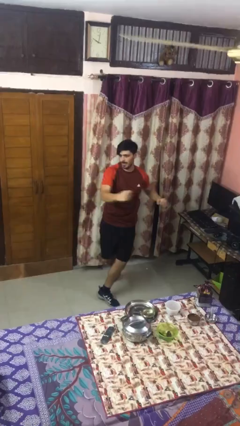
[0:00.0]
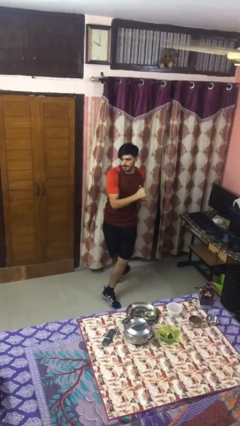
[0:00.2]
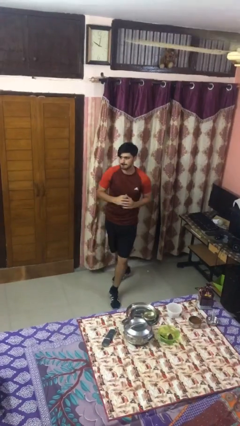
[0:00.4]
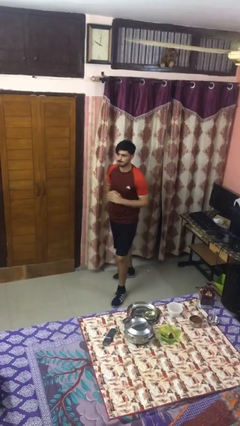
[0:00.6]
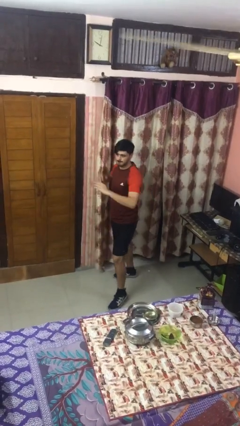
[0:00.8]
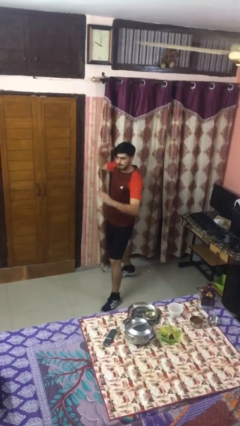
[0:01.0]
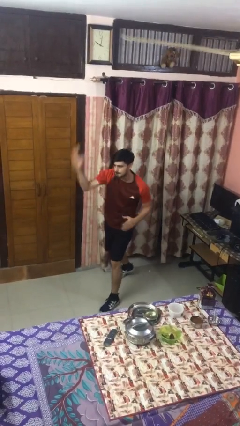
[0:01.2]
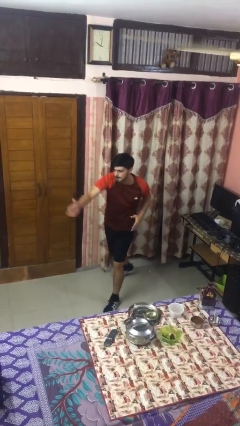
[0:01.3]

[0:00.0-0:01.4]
person karate chop

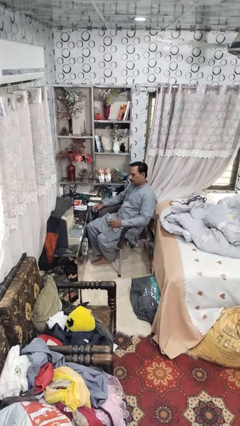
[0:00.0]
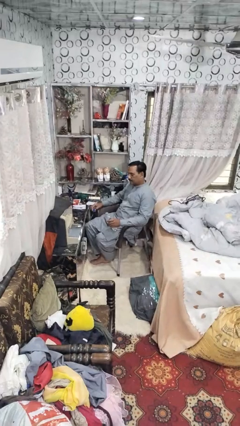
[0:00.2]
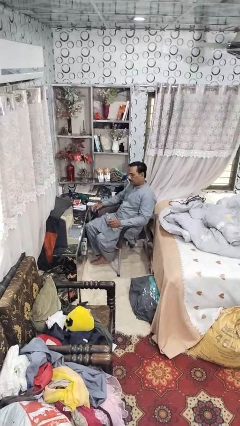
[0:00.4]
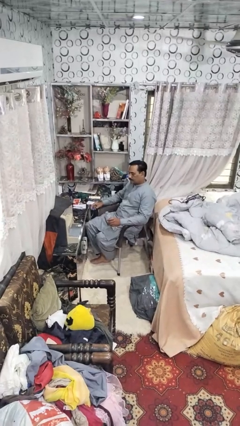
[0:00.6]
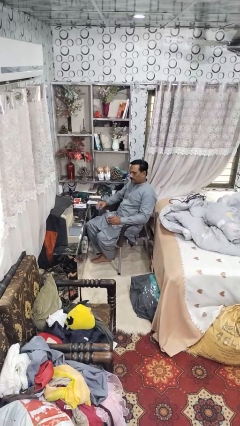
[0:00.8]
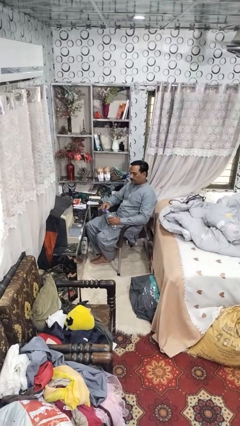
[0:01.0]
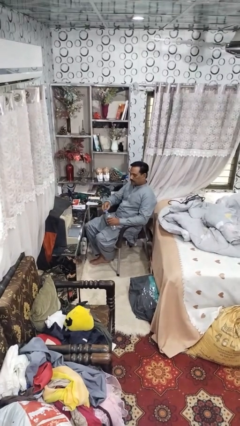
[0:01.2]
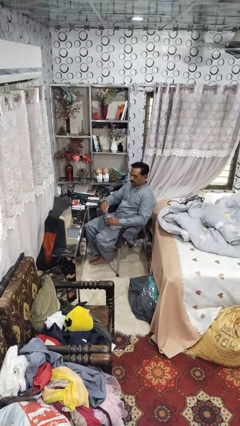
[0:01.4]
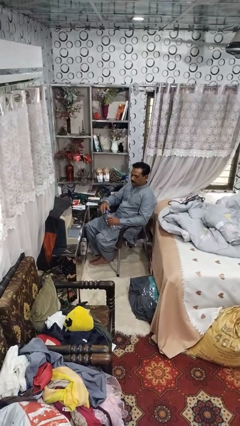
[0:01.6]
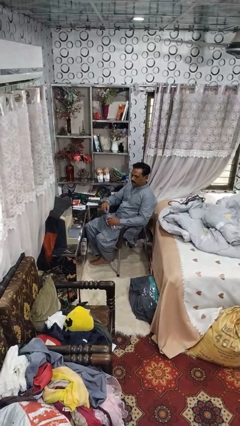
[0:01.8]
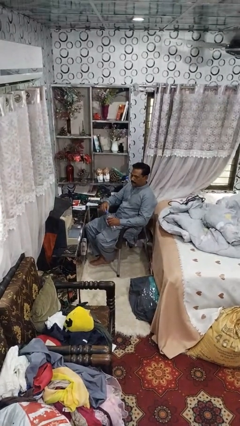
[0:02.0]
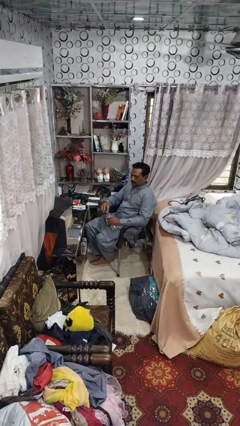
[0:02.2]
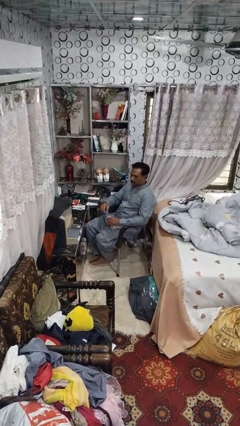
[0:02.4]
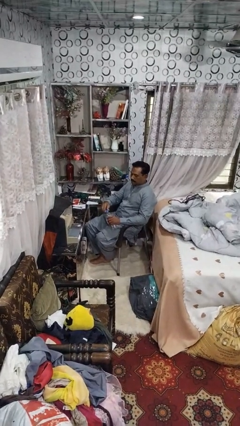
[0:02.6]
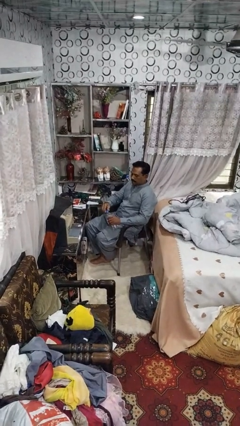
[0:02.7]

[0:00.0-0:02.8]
person screws lid to bottle

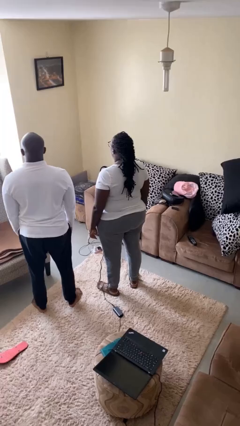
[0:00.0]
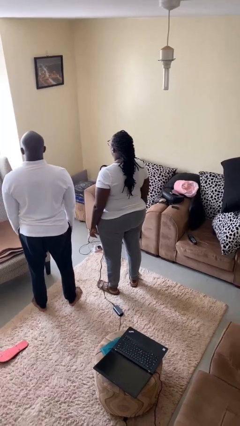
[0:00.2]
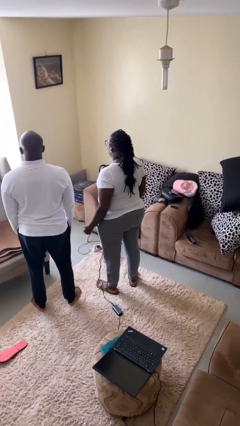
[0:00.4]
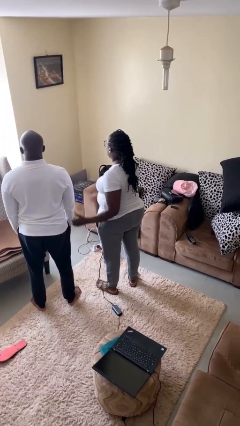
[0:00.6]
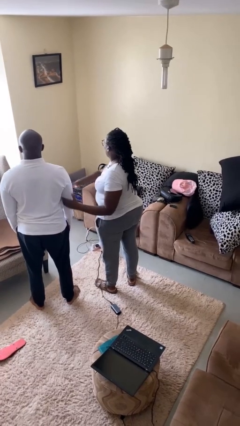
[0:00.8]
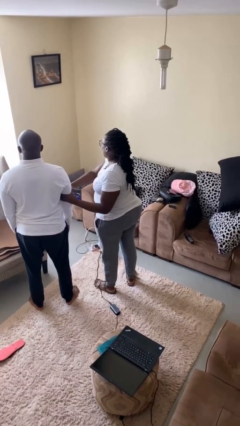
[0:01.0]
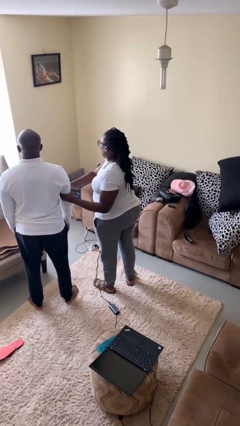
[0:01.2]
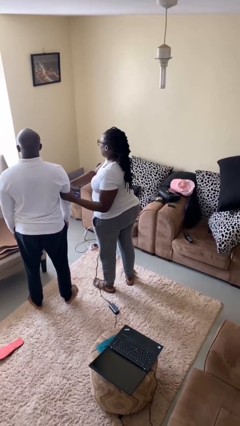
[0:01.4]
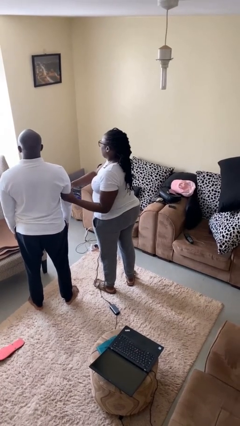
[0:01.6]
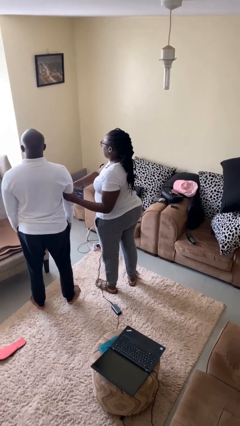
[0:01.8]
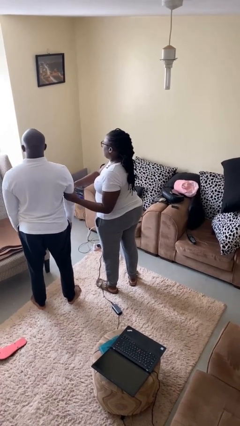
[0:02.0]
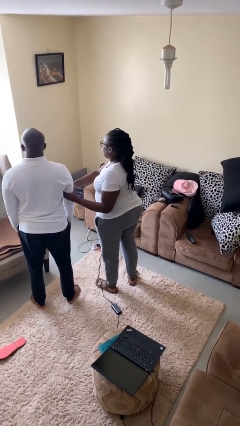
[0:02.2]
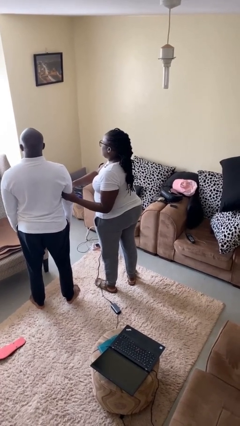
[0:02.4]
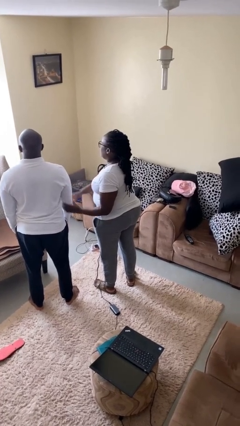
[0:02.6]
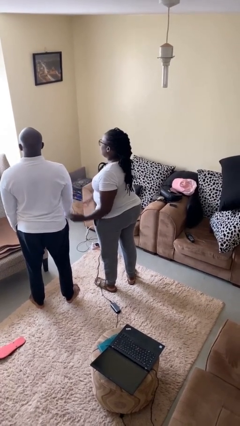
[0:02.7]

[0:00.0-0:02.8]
person grabs person by bicep

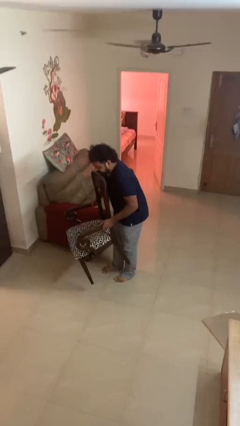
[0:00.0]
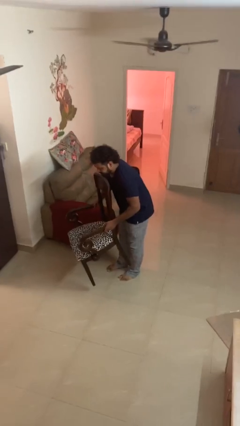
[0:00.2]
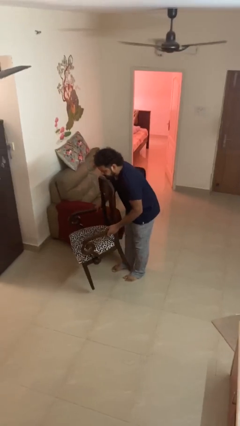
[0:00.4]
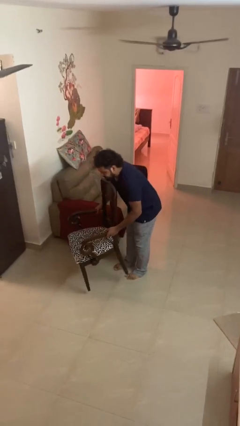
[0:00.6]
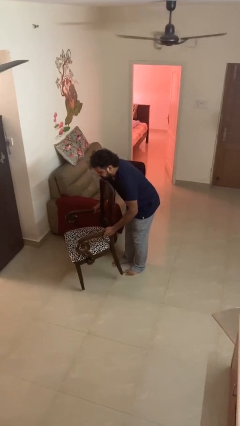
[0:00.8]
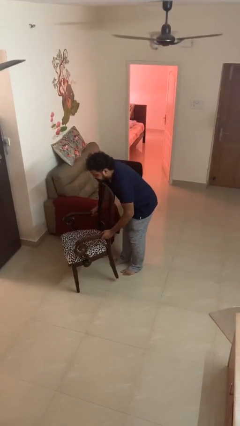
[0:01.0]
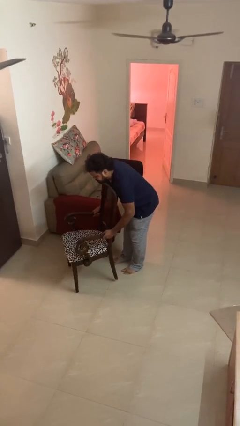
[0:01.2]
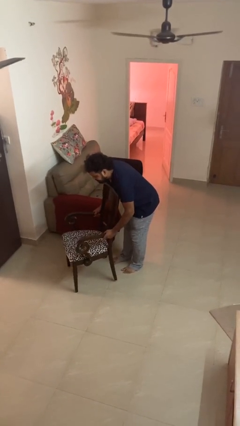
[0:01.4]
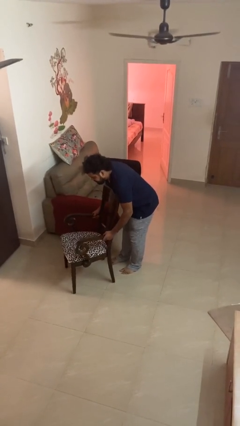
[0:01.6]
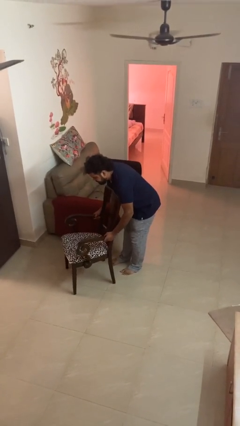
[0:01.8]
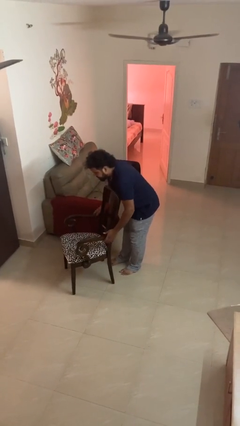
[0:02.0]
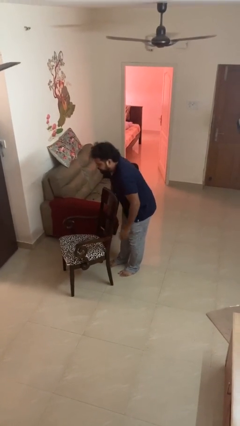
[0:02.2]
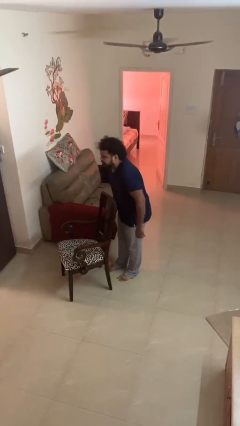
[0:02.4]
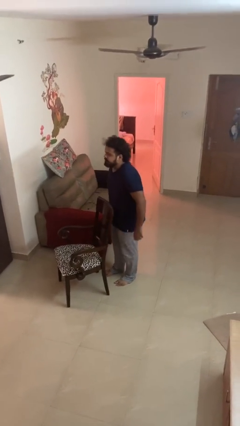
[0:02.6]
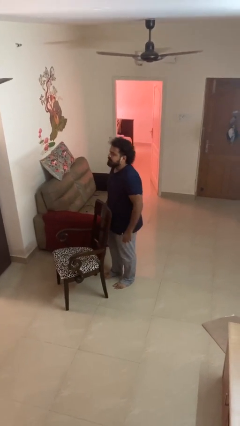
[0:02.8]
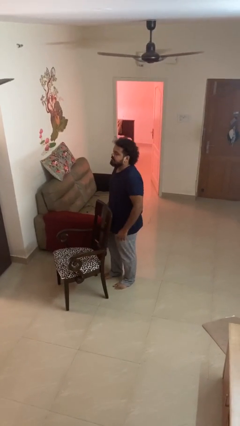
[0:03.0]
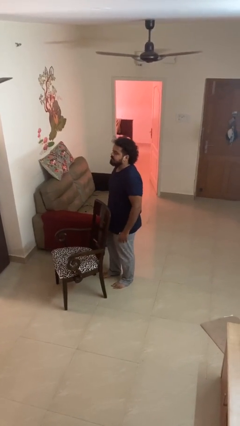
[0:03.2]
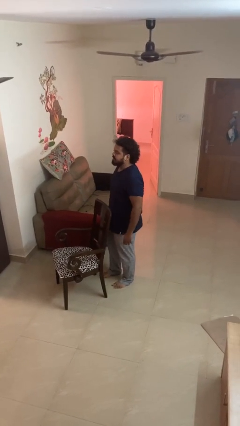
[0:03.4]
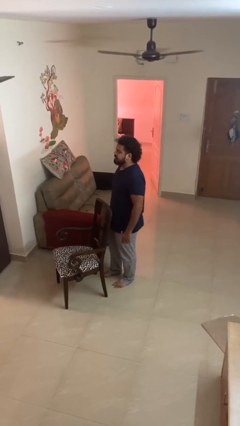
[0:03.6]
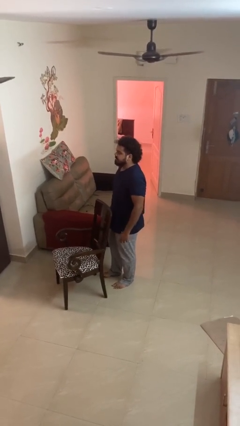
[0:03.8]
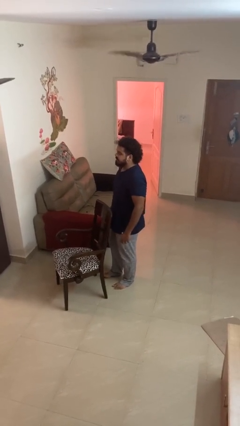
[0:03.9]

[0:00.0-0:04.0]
person puts down object on floor

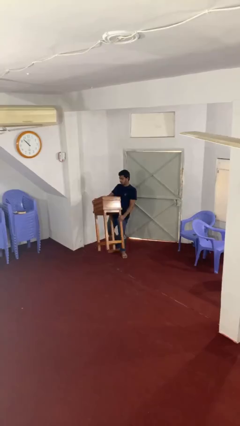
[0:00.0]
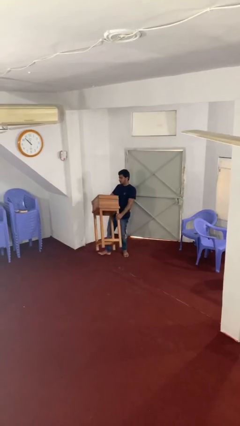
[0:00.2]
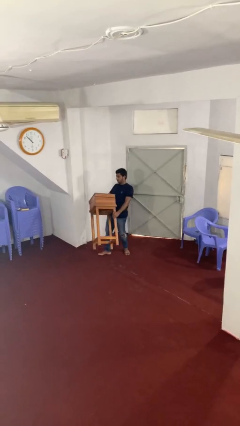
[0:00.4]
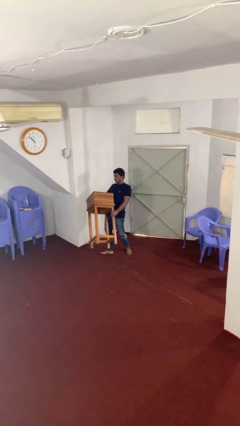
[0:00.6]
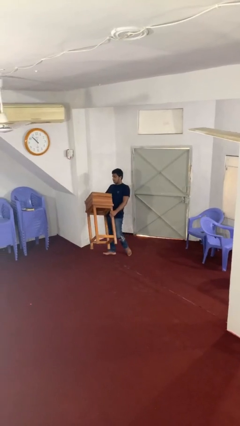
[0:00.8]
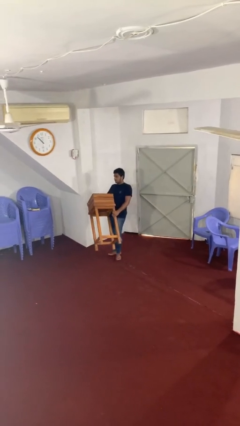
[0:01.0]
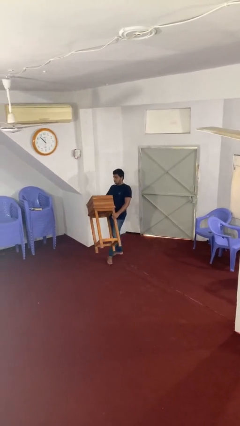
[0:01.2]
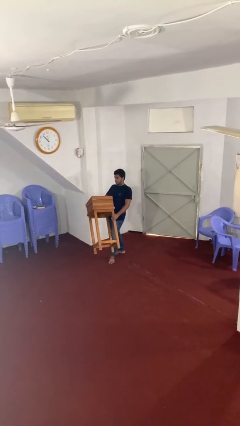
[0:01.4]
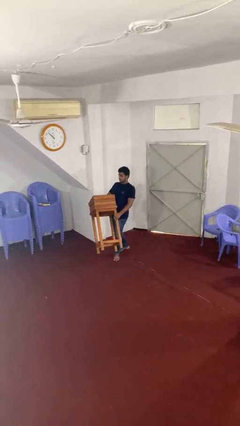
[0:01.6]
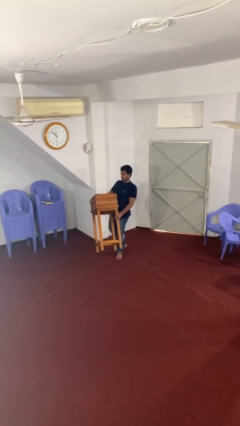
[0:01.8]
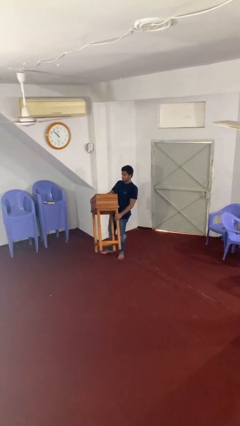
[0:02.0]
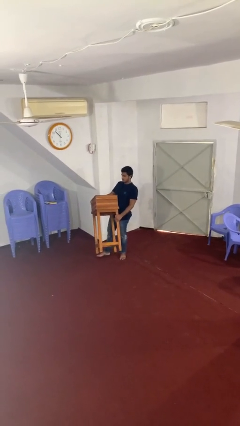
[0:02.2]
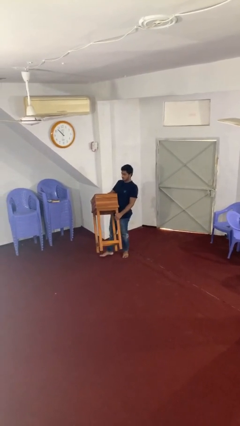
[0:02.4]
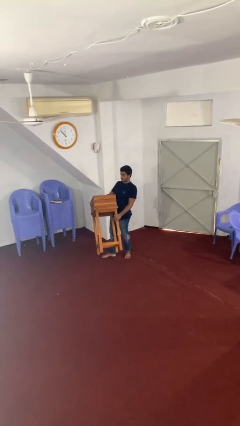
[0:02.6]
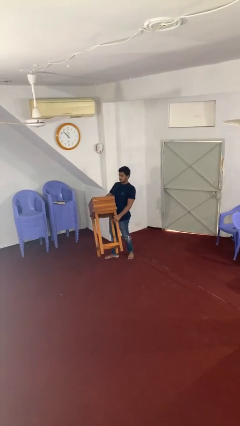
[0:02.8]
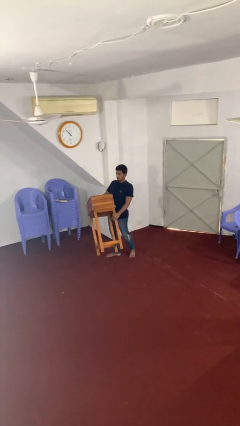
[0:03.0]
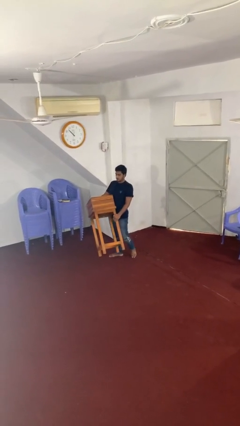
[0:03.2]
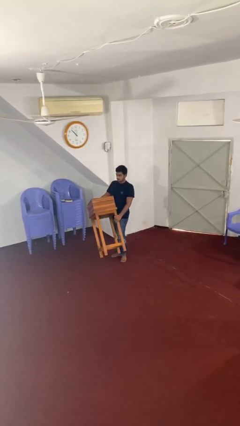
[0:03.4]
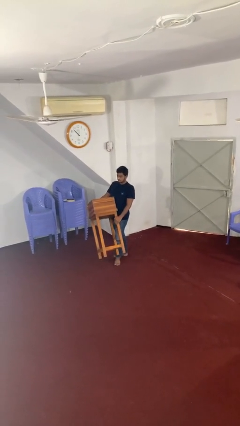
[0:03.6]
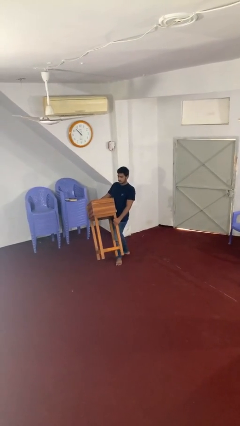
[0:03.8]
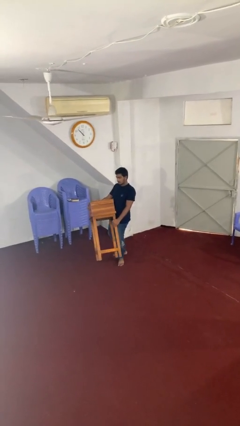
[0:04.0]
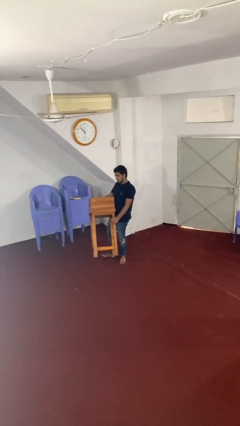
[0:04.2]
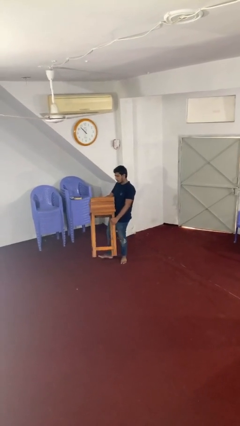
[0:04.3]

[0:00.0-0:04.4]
person carries heavy object

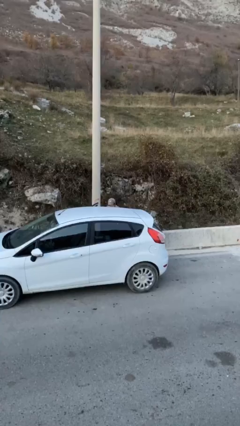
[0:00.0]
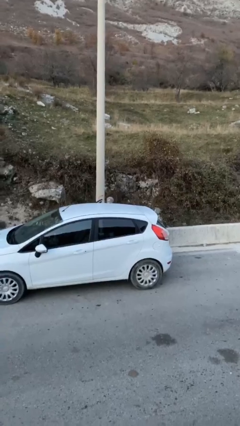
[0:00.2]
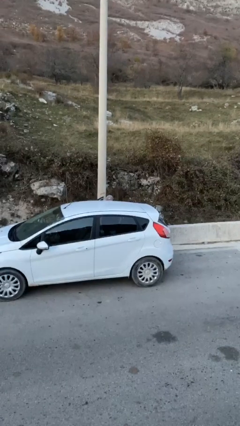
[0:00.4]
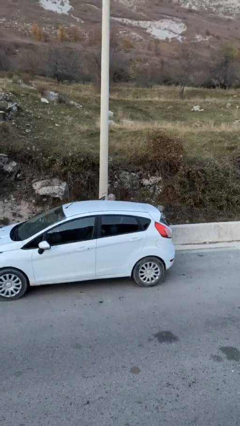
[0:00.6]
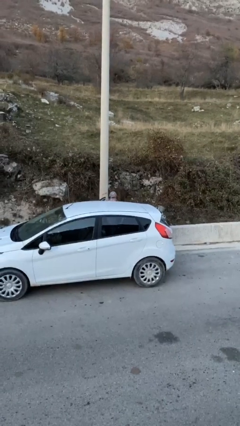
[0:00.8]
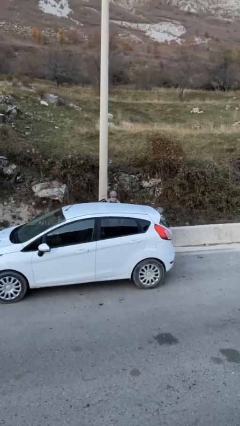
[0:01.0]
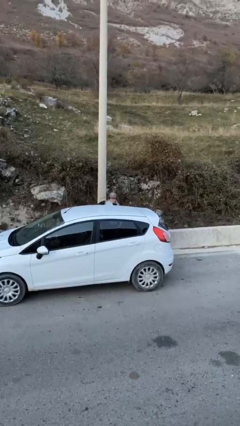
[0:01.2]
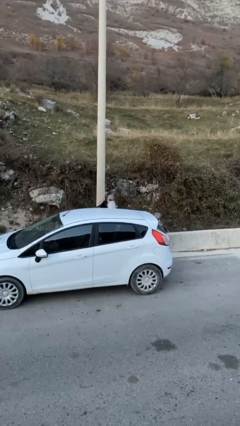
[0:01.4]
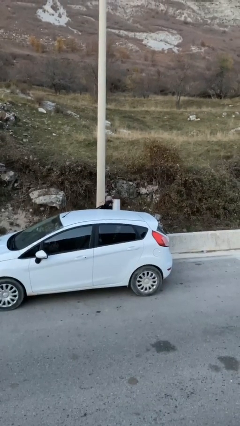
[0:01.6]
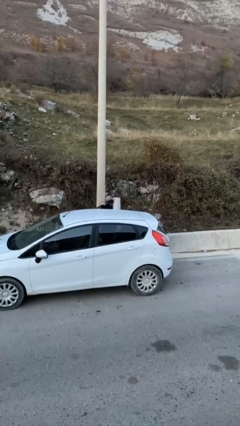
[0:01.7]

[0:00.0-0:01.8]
person unloads car
